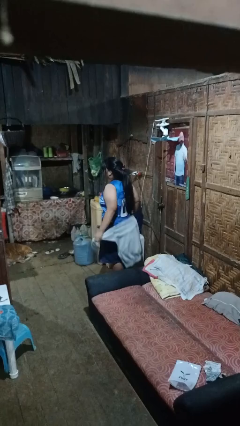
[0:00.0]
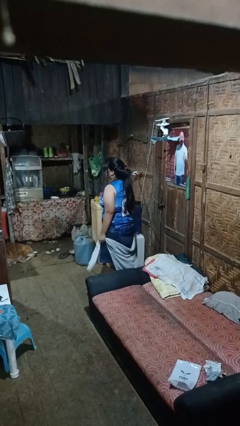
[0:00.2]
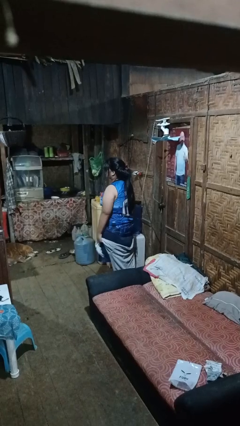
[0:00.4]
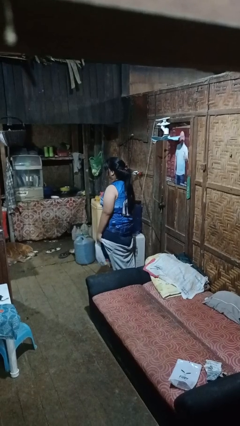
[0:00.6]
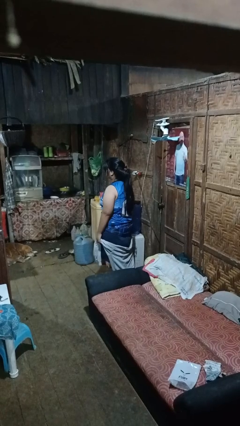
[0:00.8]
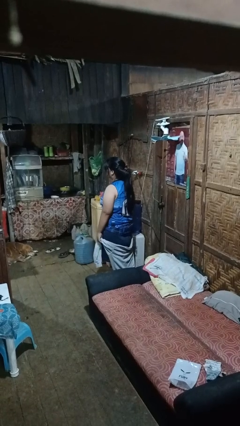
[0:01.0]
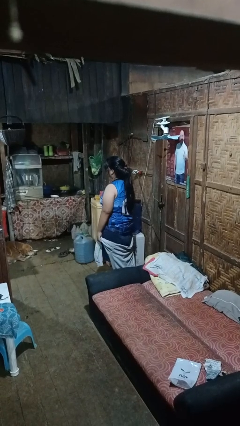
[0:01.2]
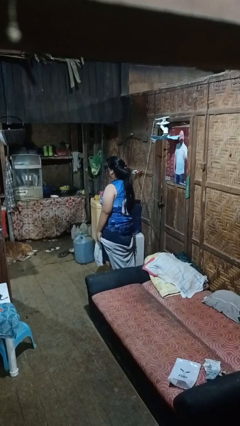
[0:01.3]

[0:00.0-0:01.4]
person unties jacket around waist

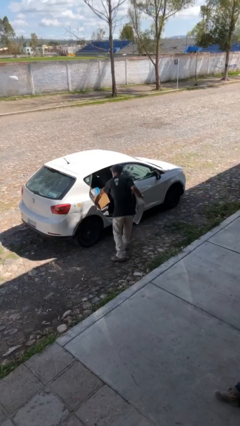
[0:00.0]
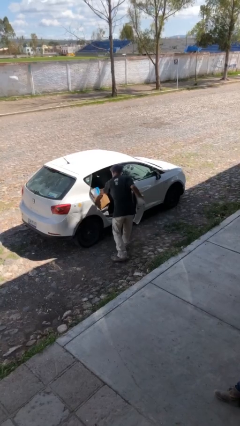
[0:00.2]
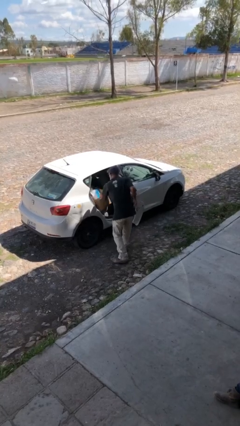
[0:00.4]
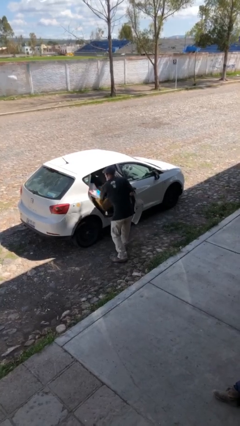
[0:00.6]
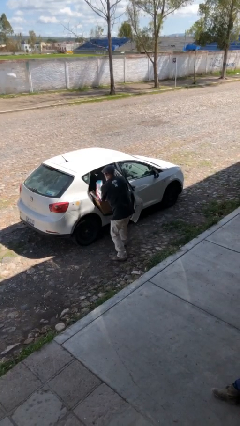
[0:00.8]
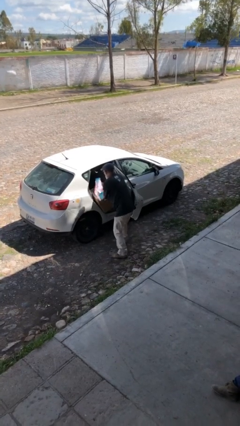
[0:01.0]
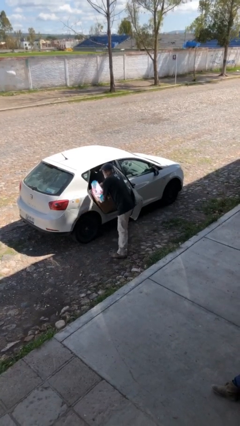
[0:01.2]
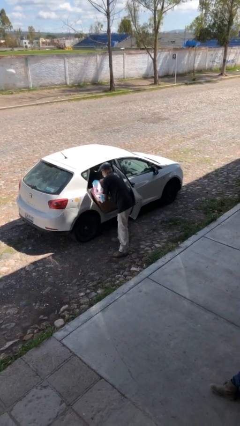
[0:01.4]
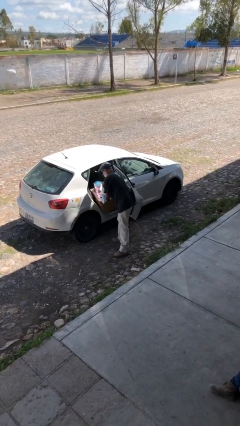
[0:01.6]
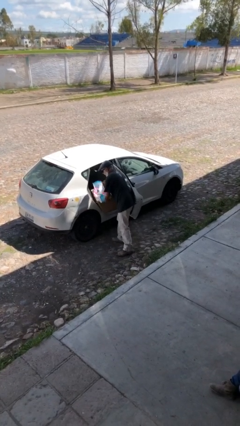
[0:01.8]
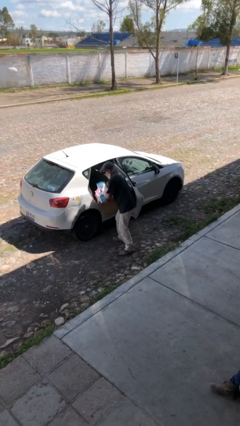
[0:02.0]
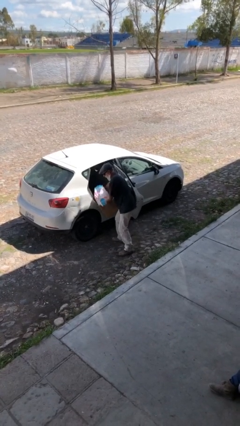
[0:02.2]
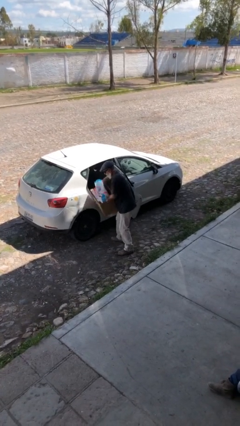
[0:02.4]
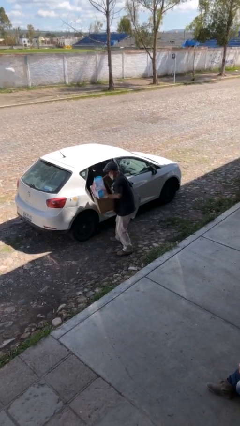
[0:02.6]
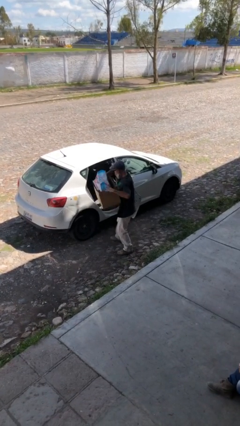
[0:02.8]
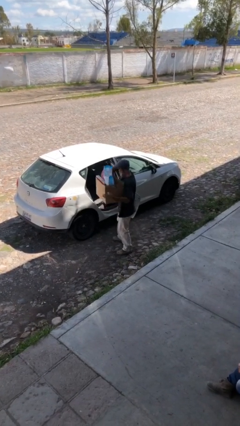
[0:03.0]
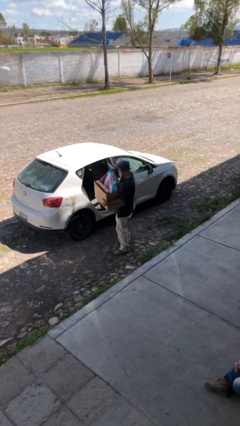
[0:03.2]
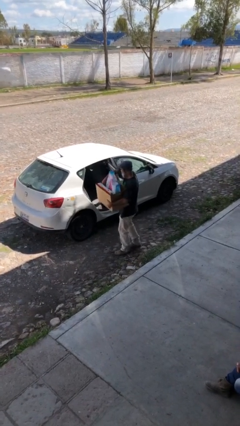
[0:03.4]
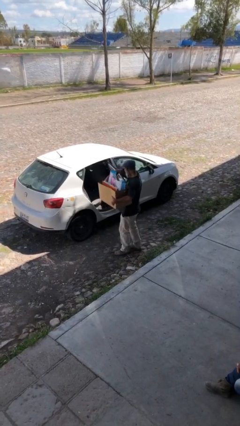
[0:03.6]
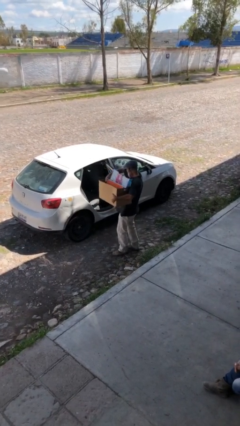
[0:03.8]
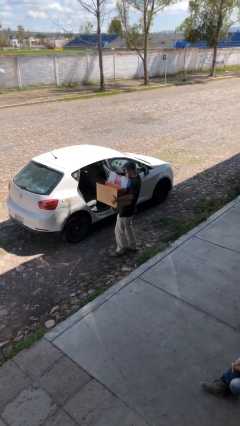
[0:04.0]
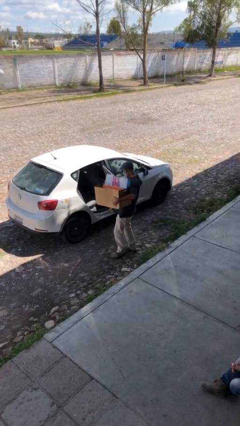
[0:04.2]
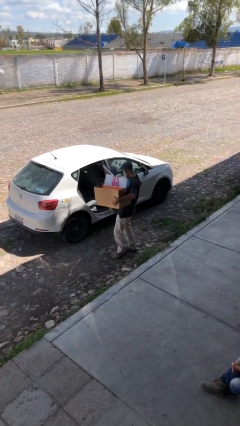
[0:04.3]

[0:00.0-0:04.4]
person unloads car

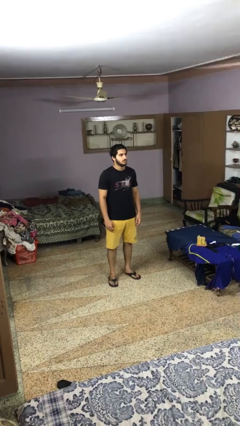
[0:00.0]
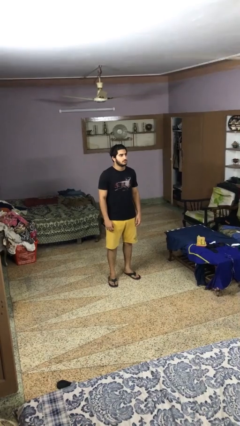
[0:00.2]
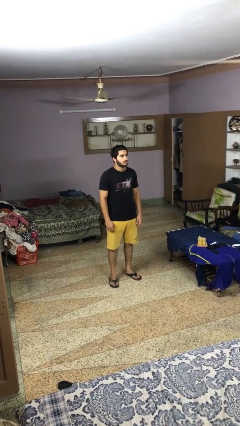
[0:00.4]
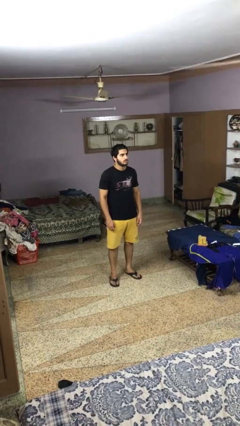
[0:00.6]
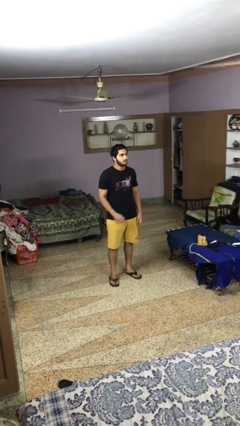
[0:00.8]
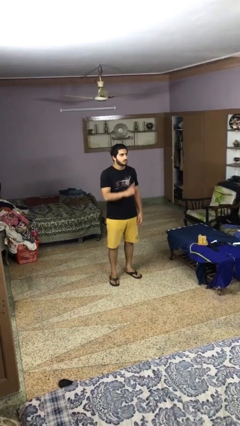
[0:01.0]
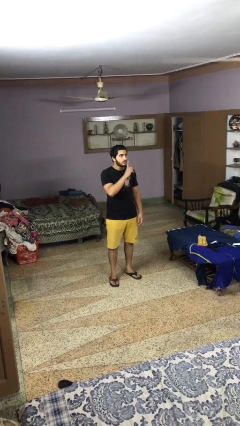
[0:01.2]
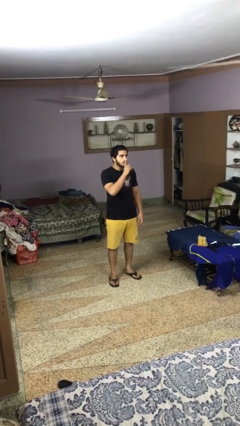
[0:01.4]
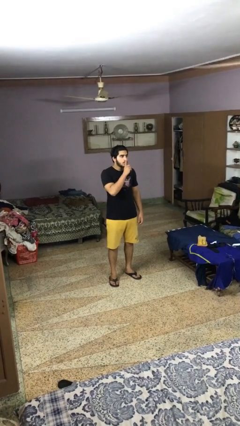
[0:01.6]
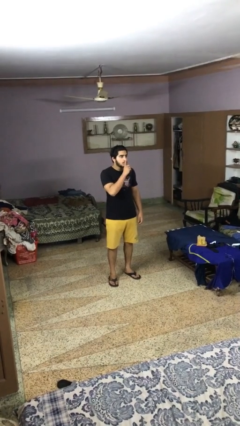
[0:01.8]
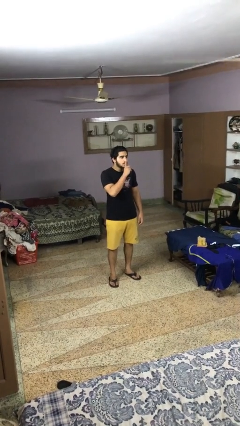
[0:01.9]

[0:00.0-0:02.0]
person gestures be quiet

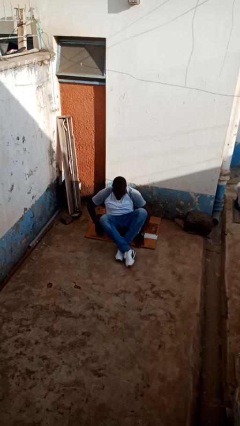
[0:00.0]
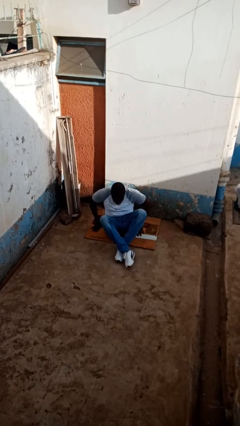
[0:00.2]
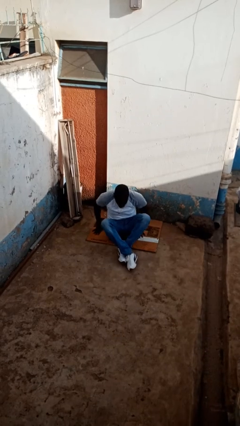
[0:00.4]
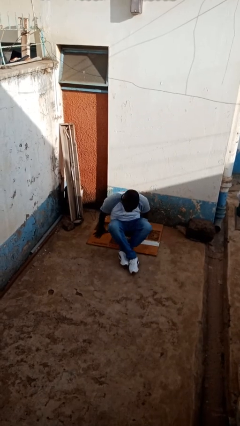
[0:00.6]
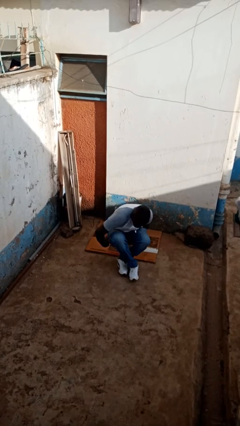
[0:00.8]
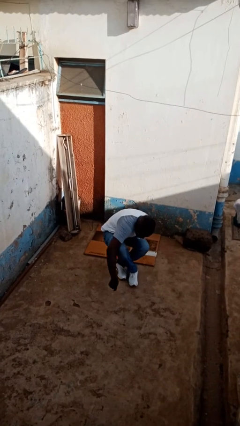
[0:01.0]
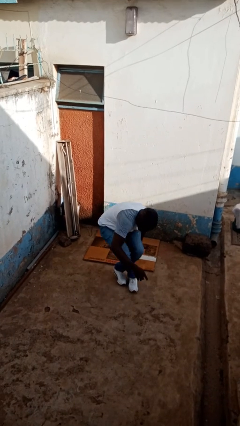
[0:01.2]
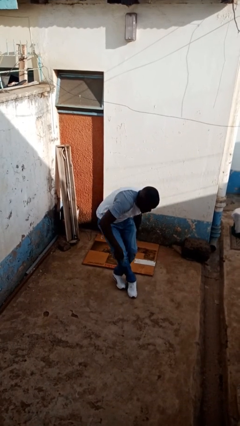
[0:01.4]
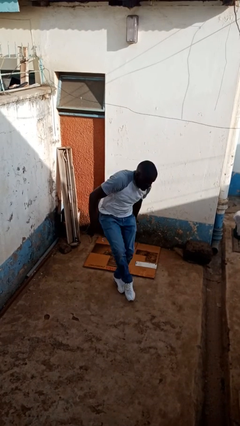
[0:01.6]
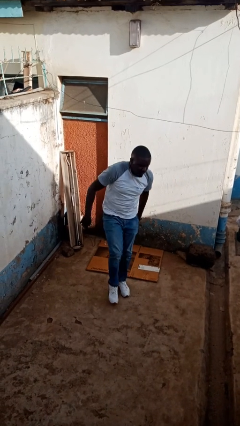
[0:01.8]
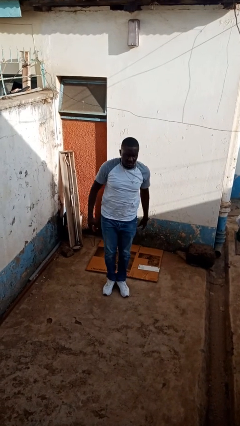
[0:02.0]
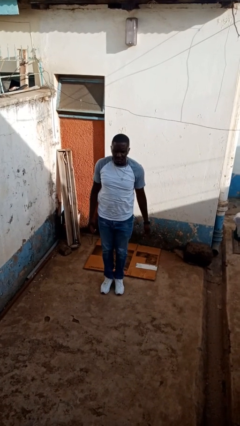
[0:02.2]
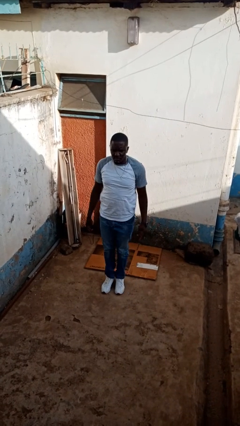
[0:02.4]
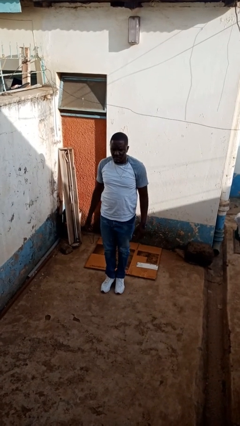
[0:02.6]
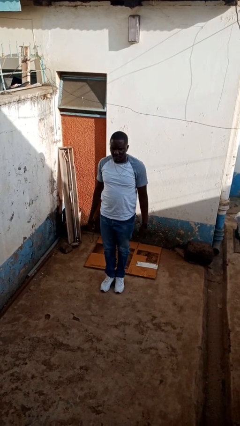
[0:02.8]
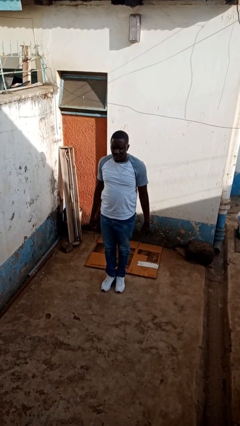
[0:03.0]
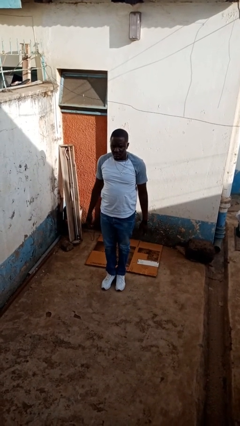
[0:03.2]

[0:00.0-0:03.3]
person stands up from floor

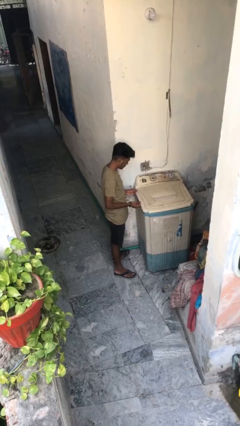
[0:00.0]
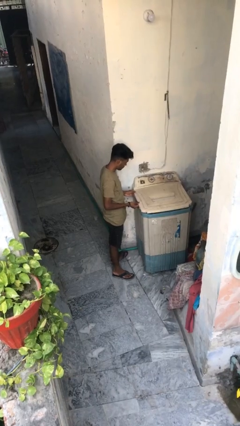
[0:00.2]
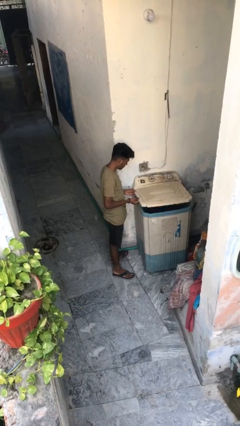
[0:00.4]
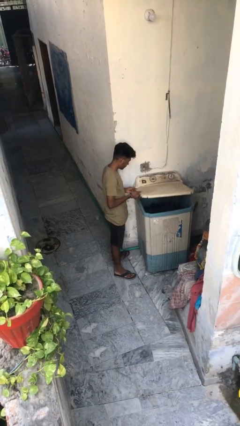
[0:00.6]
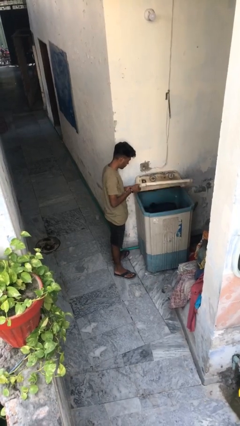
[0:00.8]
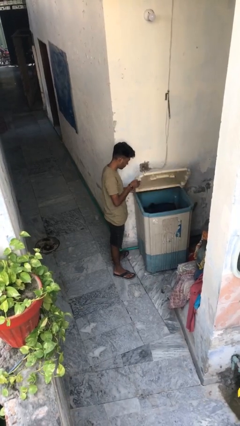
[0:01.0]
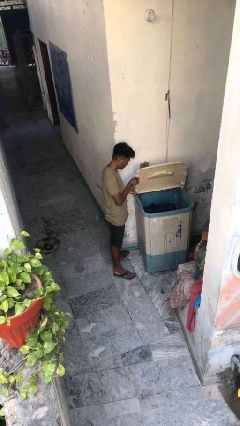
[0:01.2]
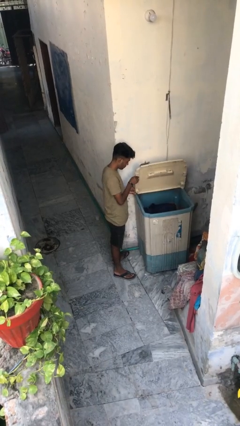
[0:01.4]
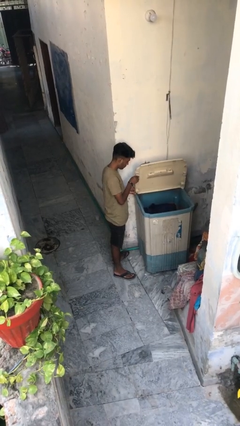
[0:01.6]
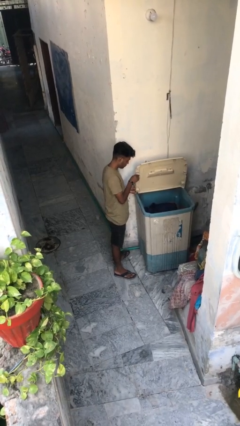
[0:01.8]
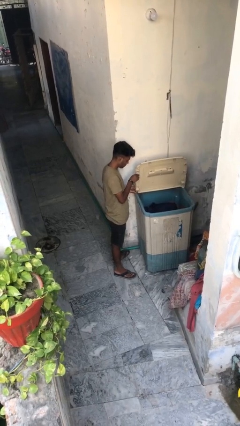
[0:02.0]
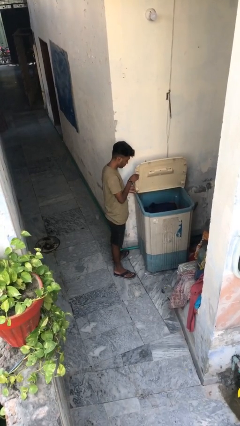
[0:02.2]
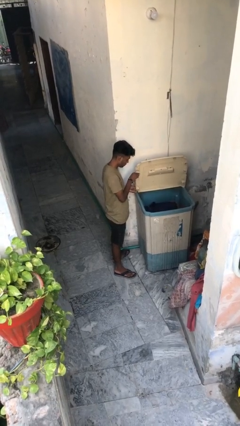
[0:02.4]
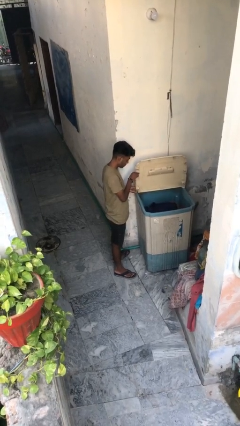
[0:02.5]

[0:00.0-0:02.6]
person opens clothes washer

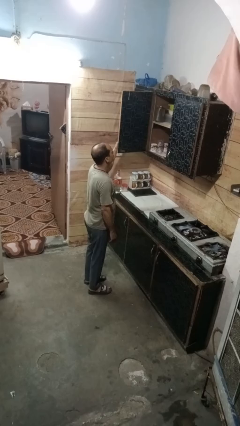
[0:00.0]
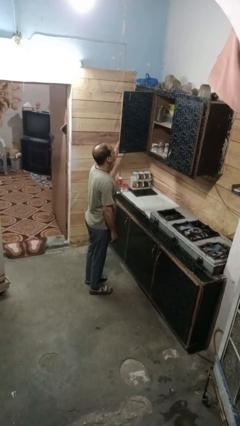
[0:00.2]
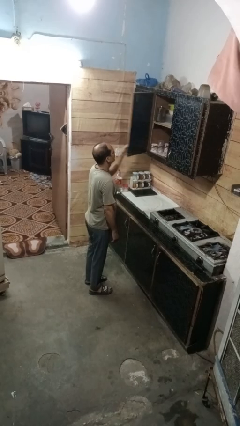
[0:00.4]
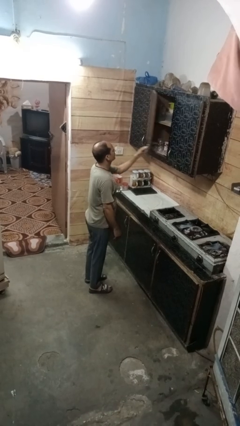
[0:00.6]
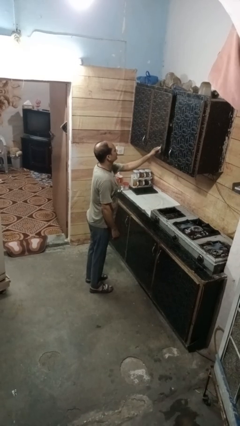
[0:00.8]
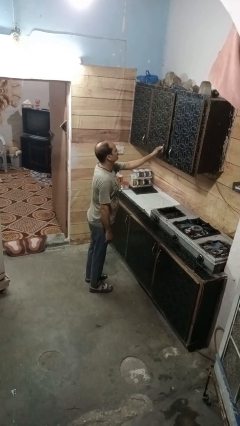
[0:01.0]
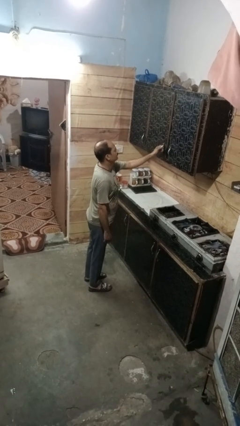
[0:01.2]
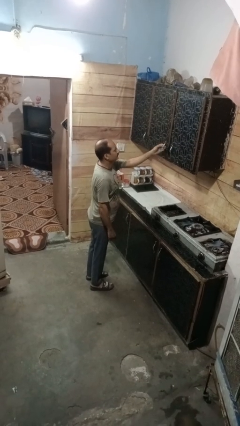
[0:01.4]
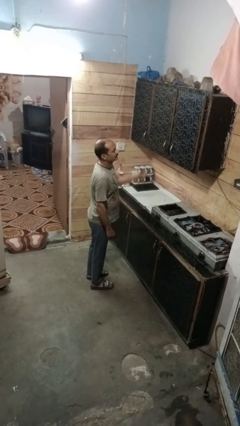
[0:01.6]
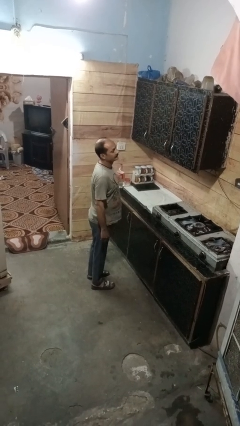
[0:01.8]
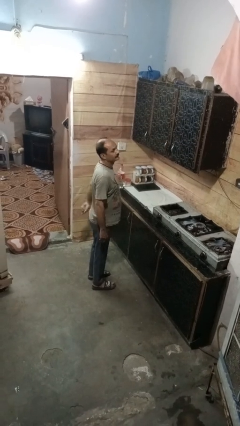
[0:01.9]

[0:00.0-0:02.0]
person closes cabinet

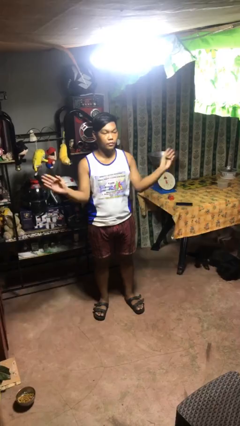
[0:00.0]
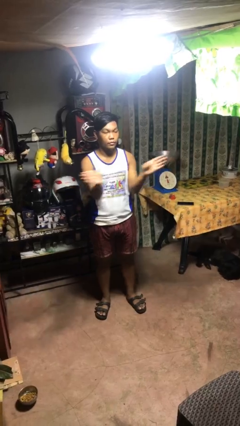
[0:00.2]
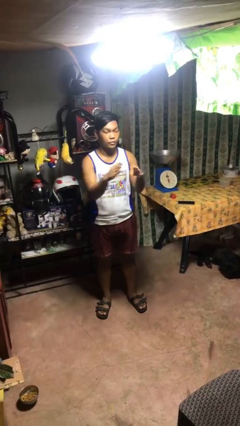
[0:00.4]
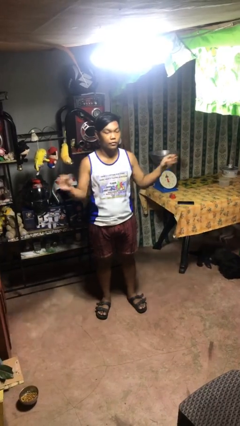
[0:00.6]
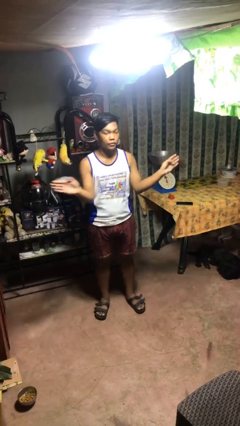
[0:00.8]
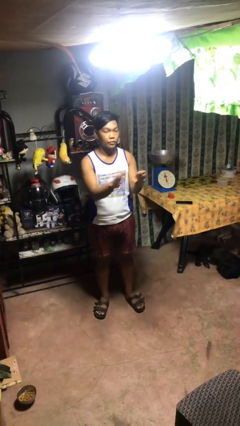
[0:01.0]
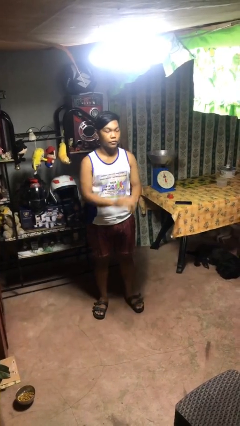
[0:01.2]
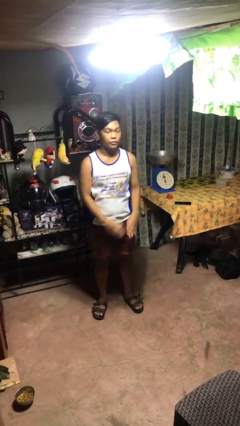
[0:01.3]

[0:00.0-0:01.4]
person gestures zoom out

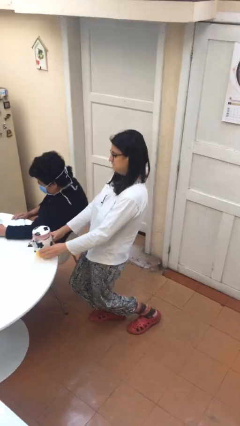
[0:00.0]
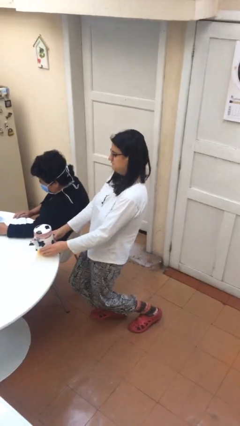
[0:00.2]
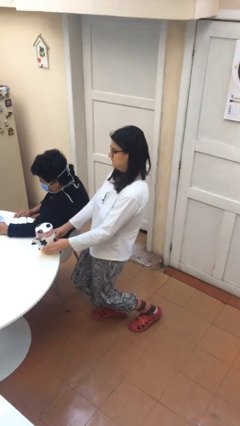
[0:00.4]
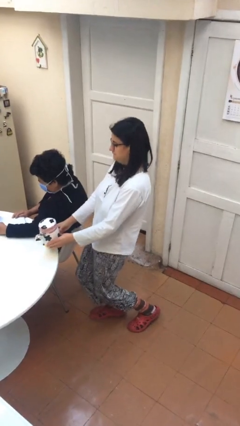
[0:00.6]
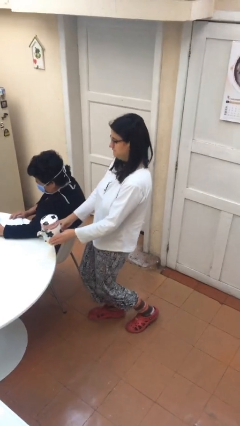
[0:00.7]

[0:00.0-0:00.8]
person steals object from person
